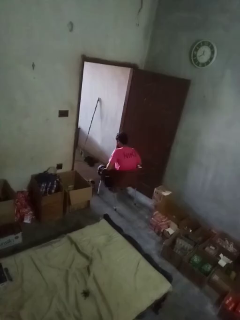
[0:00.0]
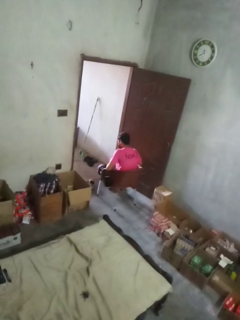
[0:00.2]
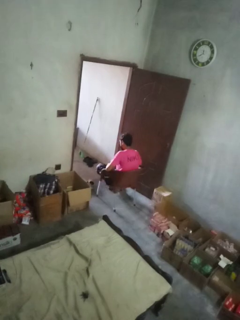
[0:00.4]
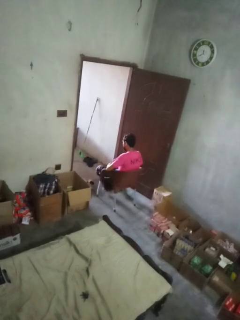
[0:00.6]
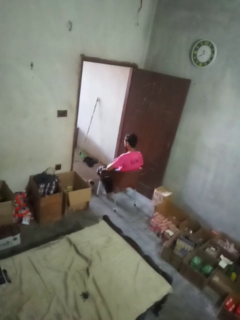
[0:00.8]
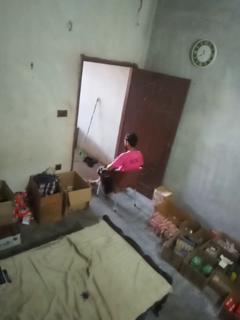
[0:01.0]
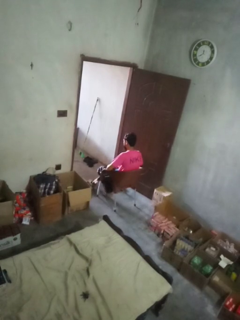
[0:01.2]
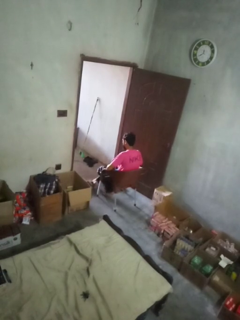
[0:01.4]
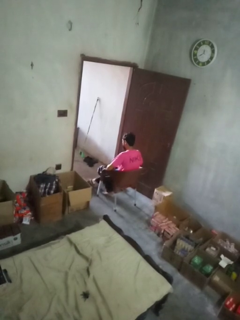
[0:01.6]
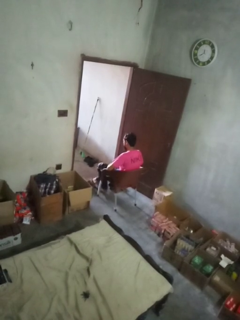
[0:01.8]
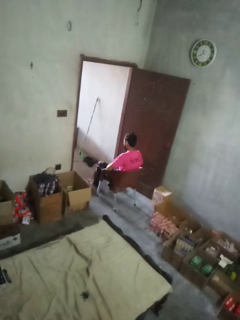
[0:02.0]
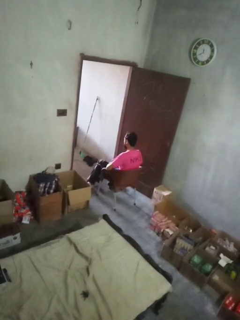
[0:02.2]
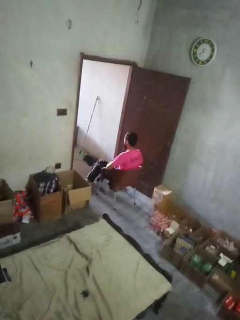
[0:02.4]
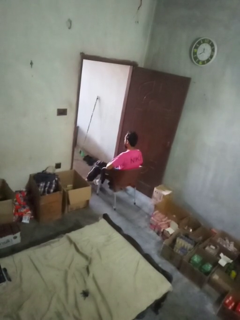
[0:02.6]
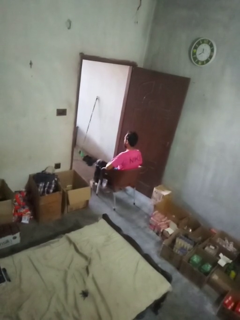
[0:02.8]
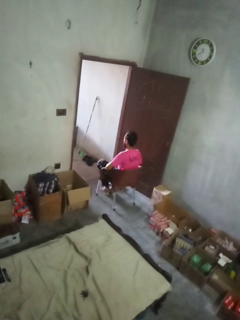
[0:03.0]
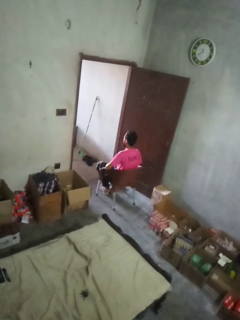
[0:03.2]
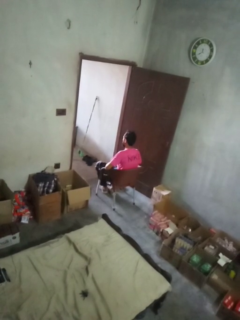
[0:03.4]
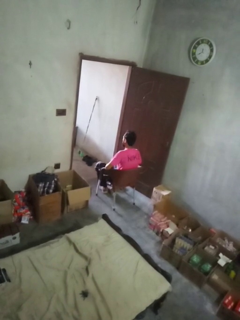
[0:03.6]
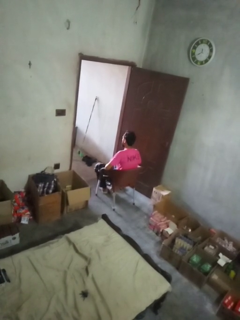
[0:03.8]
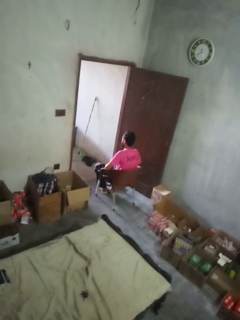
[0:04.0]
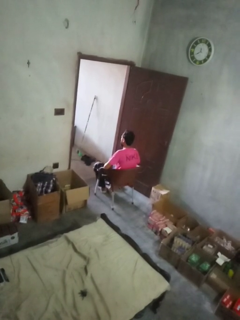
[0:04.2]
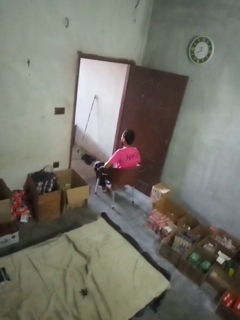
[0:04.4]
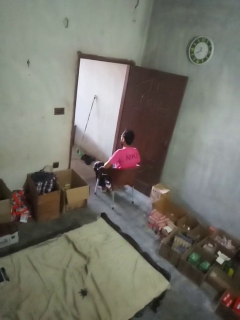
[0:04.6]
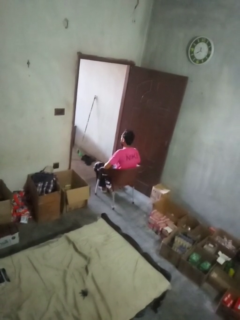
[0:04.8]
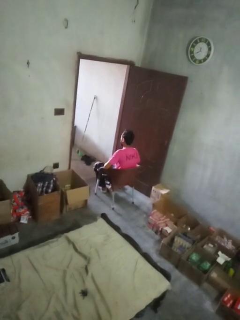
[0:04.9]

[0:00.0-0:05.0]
person puts on shoes

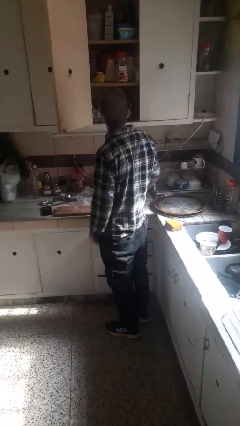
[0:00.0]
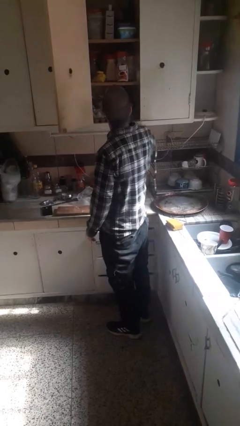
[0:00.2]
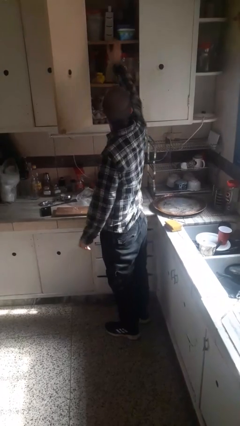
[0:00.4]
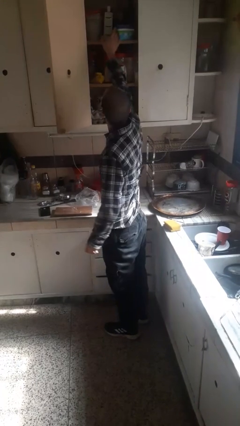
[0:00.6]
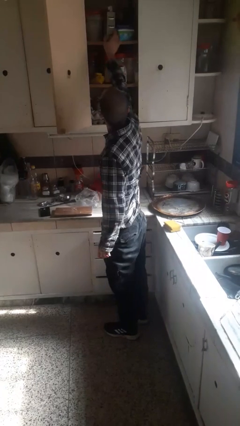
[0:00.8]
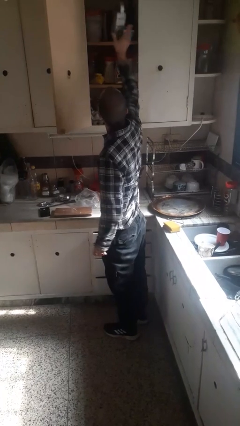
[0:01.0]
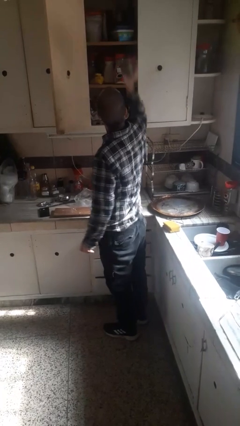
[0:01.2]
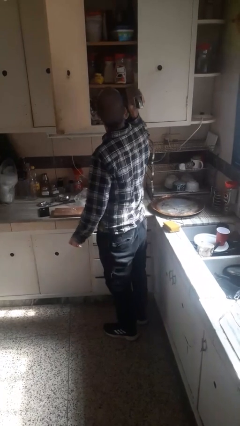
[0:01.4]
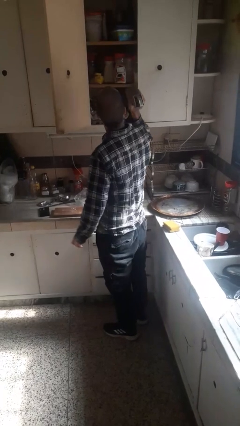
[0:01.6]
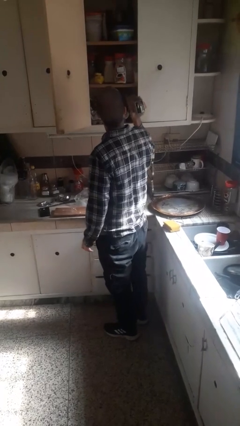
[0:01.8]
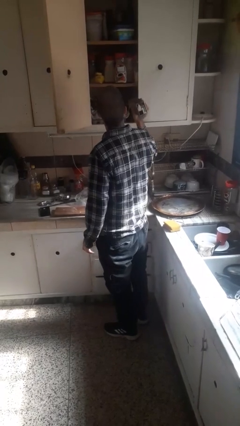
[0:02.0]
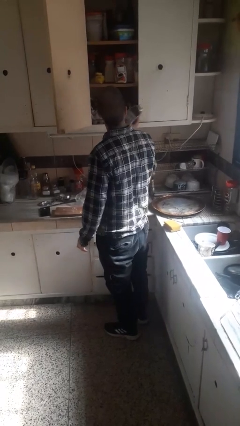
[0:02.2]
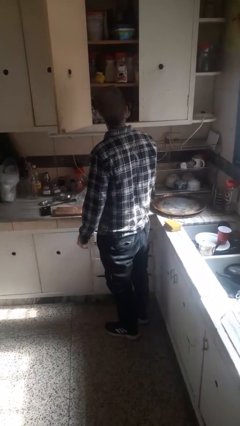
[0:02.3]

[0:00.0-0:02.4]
person puts down object into cabinet

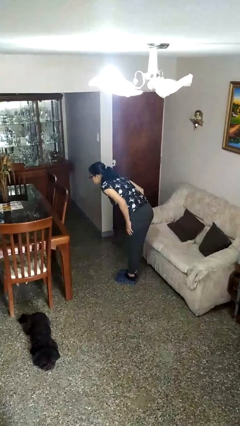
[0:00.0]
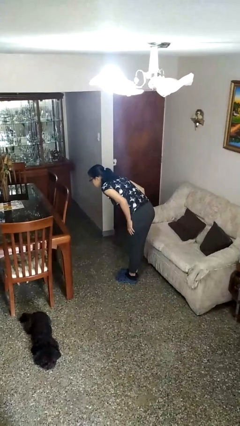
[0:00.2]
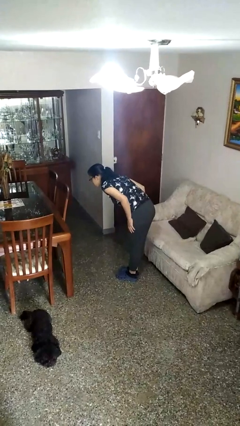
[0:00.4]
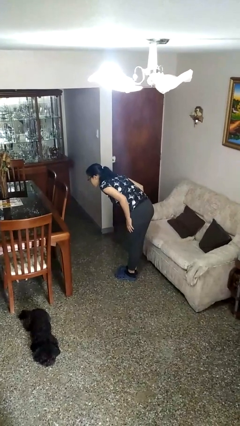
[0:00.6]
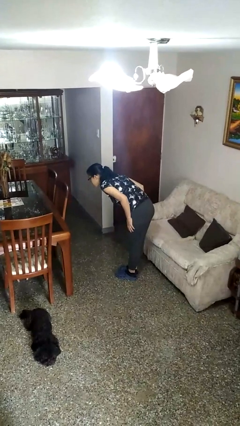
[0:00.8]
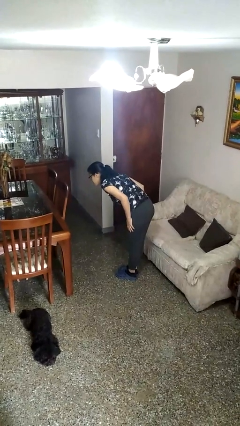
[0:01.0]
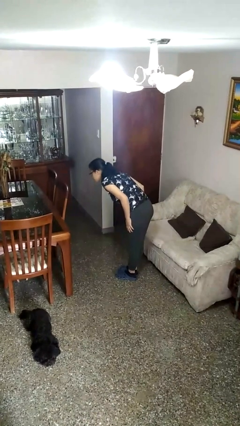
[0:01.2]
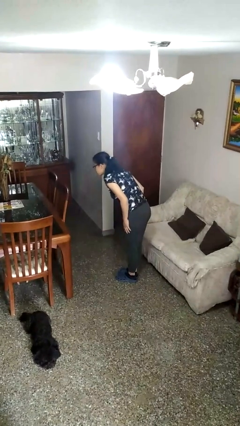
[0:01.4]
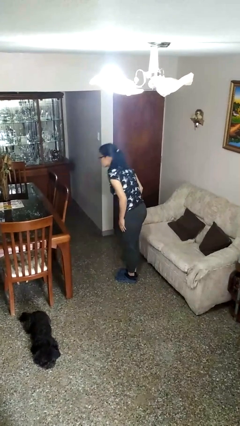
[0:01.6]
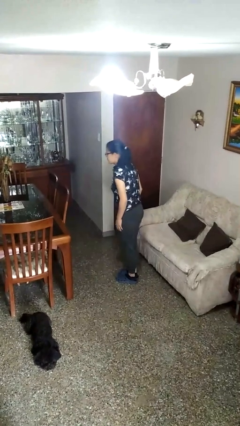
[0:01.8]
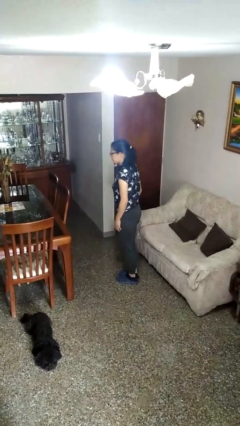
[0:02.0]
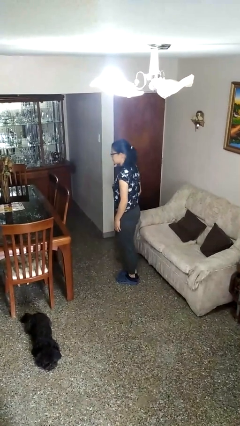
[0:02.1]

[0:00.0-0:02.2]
person bows

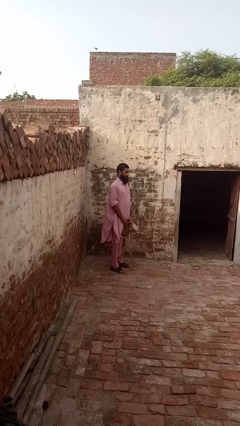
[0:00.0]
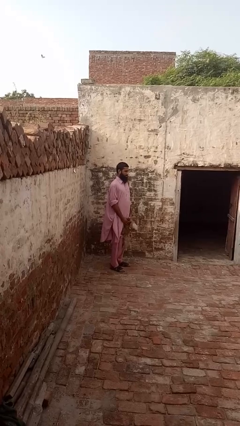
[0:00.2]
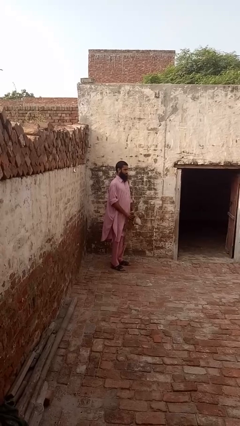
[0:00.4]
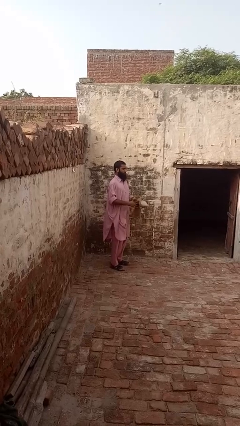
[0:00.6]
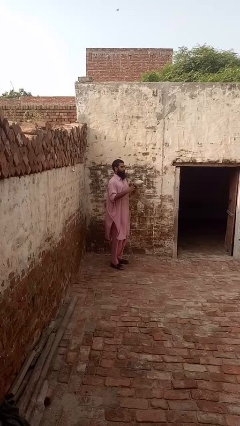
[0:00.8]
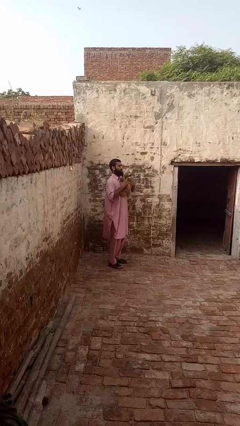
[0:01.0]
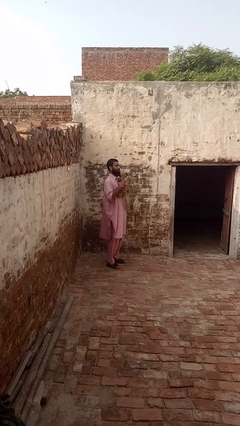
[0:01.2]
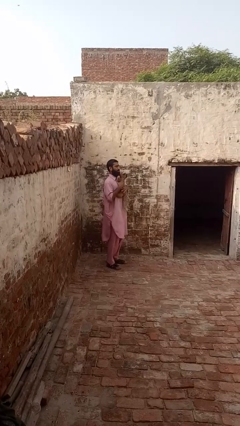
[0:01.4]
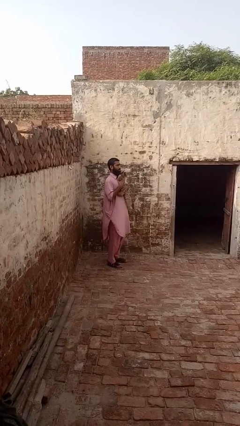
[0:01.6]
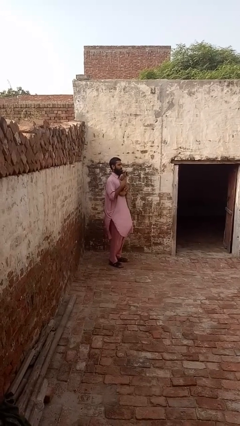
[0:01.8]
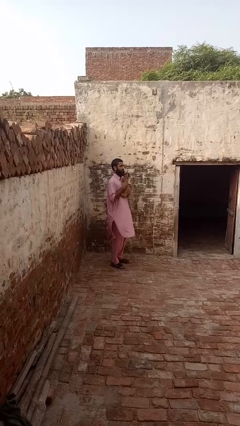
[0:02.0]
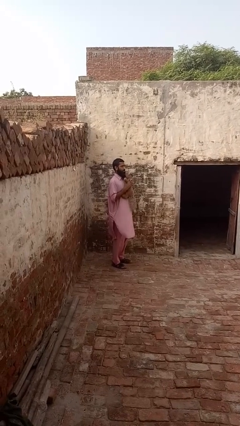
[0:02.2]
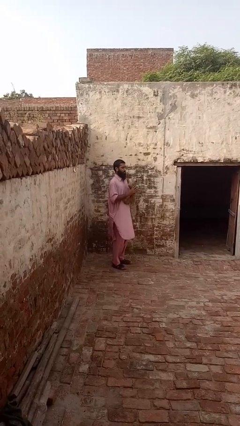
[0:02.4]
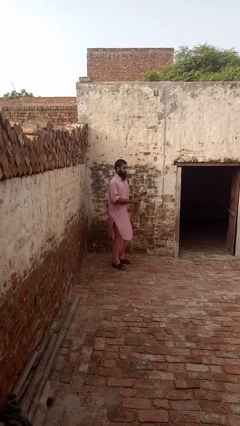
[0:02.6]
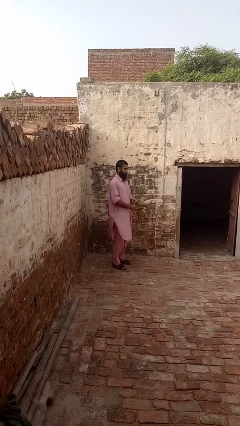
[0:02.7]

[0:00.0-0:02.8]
person hugs stuffed animal

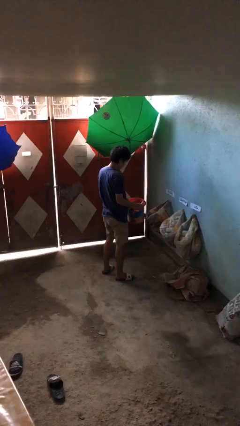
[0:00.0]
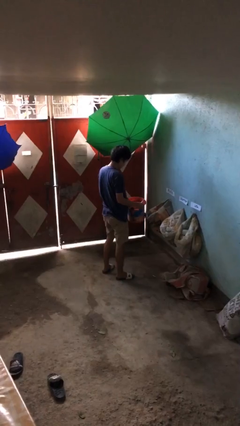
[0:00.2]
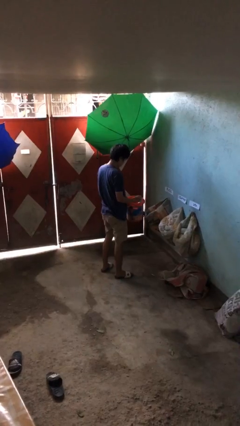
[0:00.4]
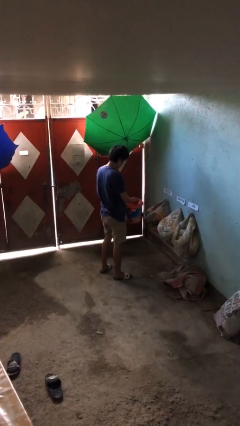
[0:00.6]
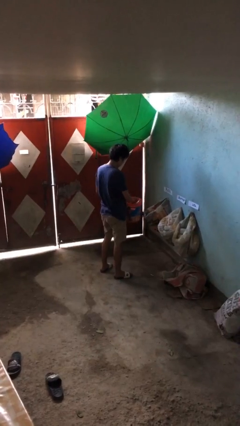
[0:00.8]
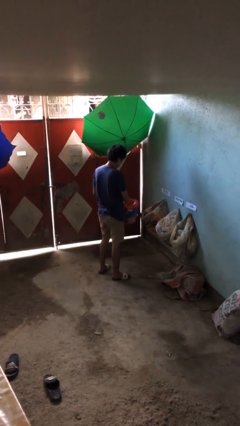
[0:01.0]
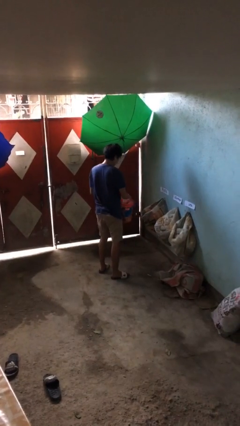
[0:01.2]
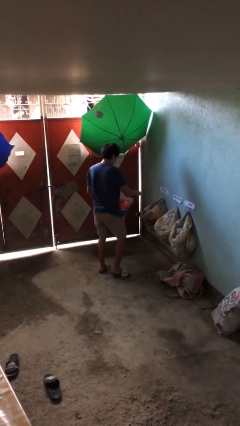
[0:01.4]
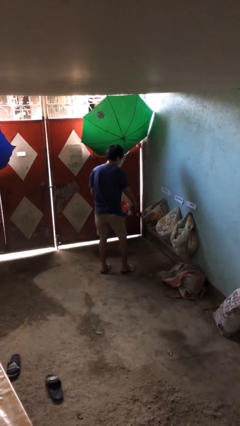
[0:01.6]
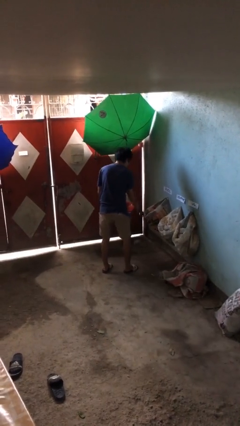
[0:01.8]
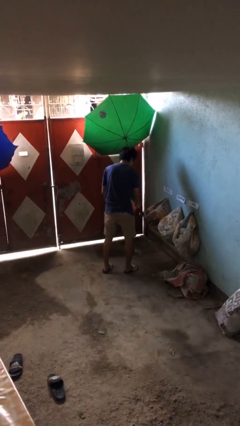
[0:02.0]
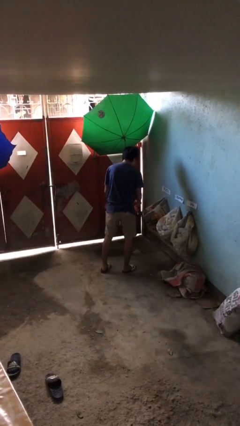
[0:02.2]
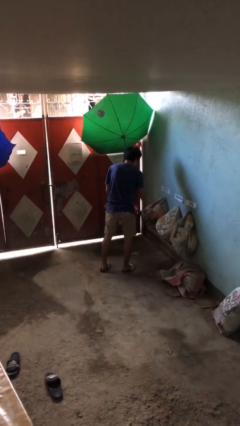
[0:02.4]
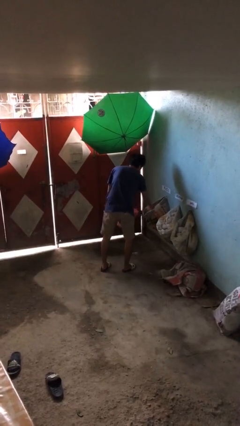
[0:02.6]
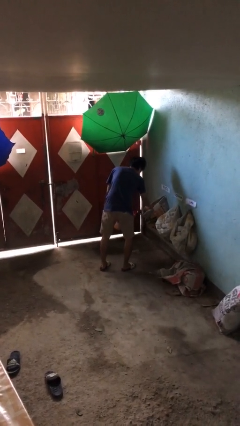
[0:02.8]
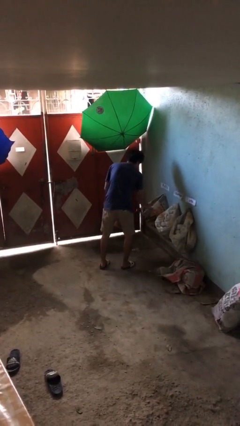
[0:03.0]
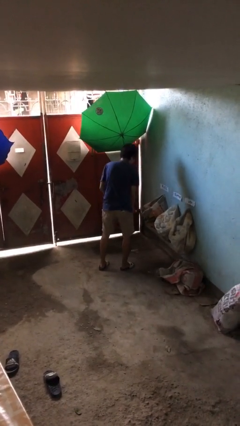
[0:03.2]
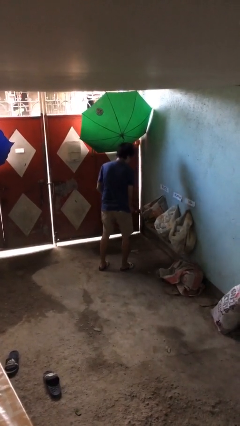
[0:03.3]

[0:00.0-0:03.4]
person discards trash

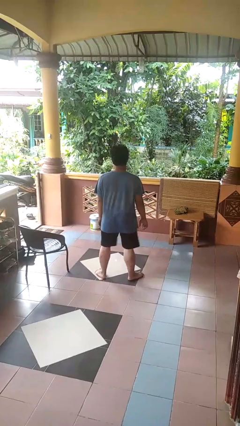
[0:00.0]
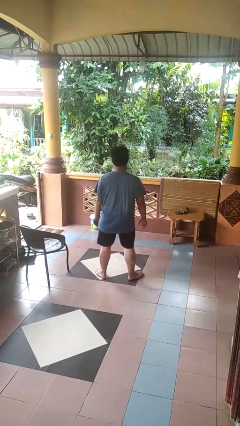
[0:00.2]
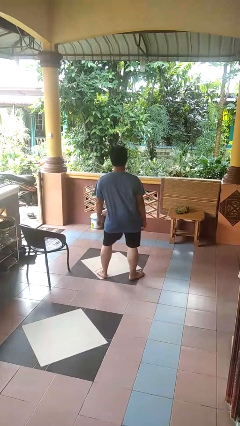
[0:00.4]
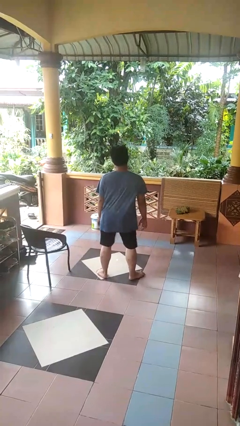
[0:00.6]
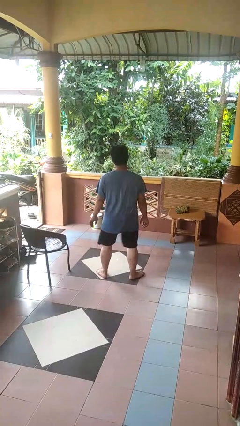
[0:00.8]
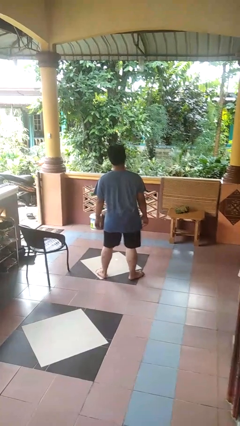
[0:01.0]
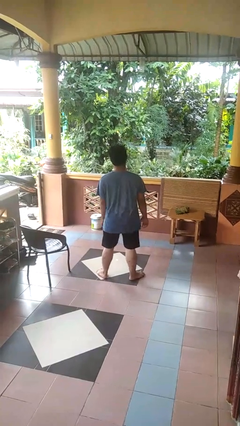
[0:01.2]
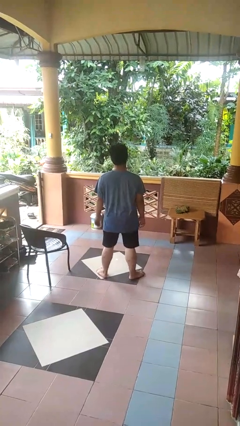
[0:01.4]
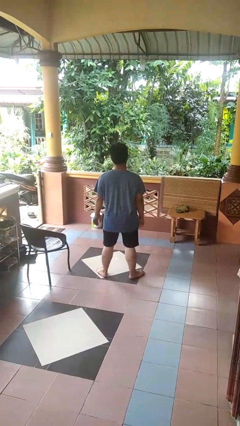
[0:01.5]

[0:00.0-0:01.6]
person wiggles hips

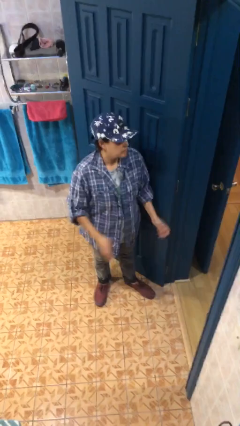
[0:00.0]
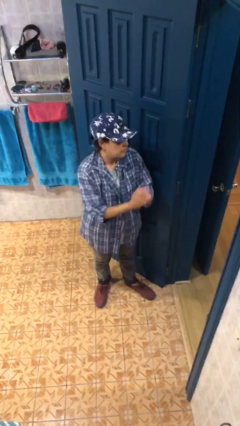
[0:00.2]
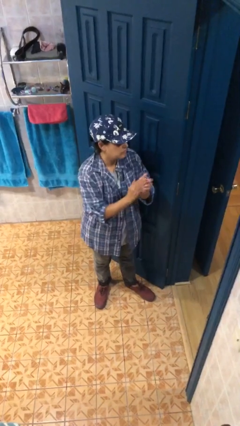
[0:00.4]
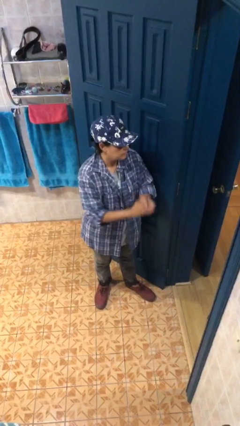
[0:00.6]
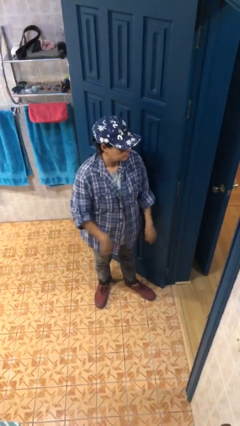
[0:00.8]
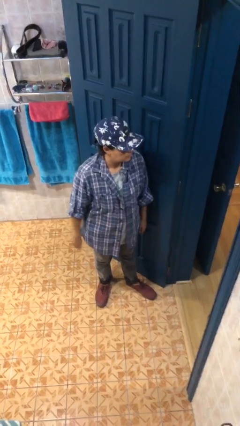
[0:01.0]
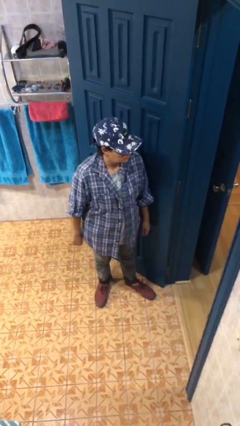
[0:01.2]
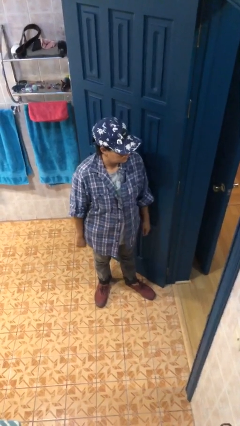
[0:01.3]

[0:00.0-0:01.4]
person claps hands
